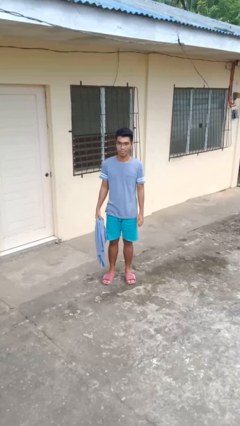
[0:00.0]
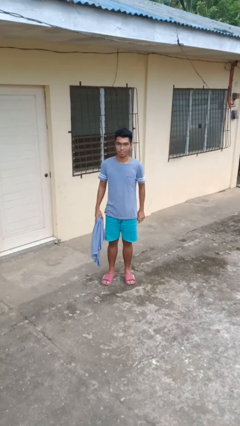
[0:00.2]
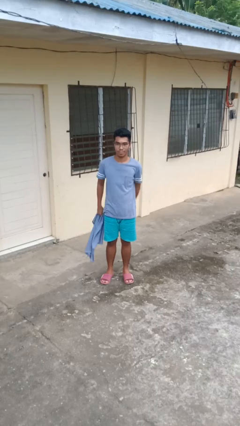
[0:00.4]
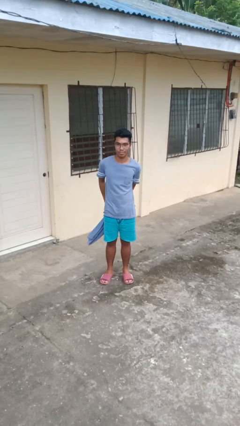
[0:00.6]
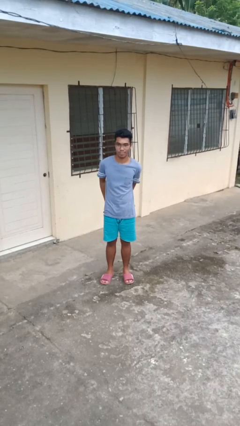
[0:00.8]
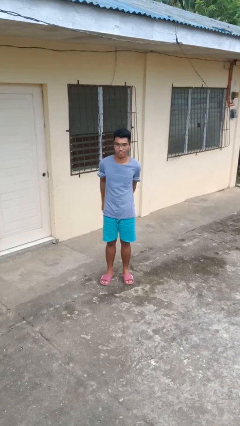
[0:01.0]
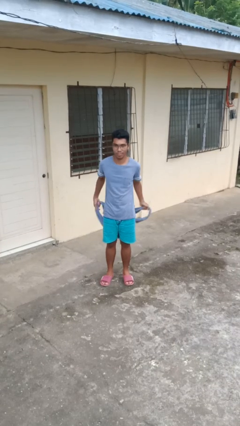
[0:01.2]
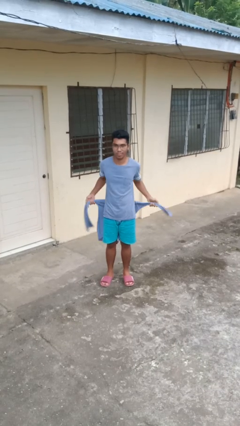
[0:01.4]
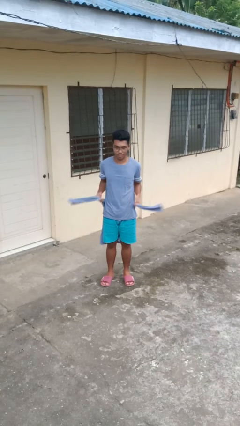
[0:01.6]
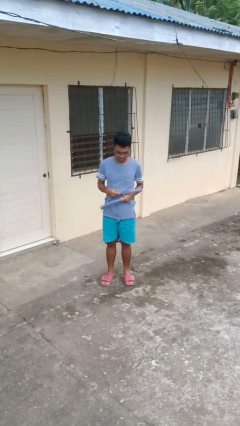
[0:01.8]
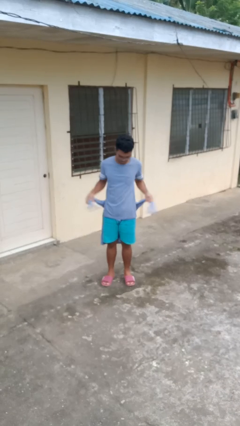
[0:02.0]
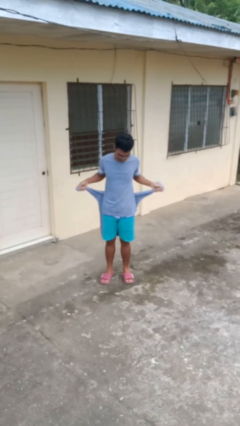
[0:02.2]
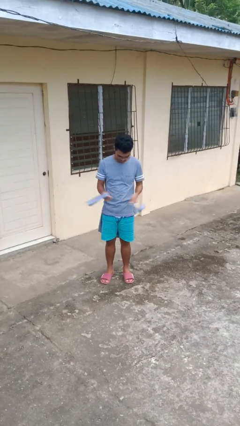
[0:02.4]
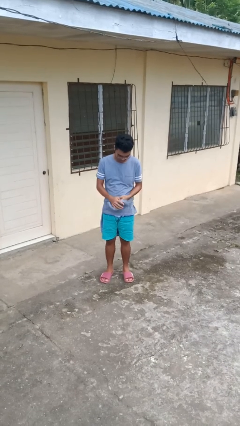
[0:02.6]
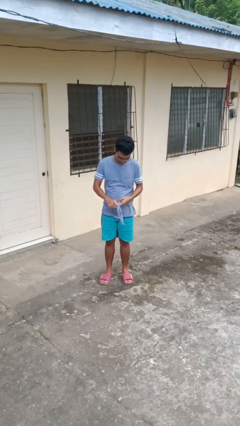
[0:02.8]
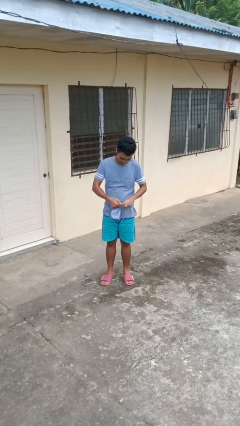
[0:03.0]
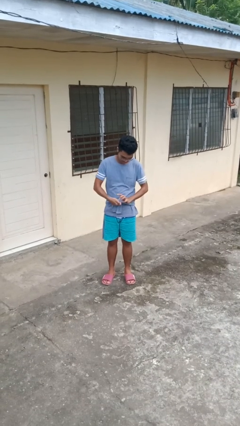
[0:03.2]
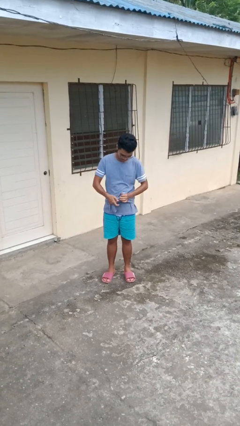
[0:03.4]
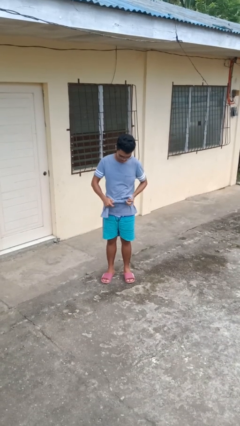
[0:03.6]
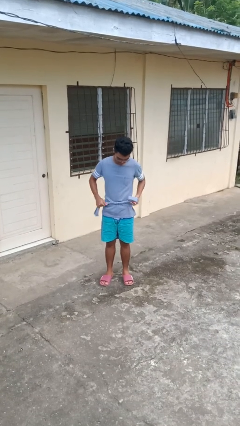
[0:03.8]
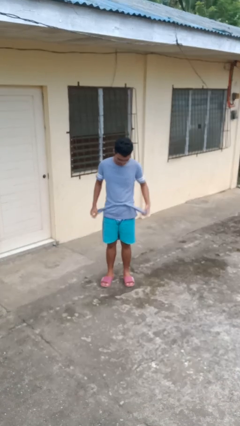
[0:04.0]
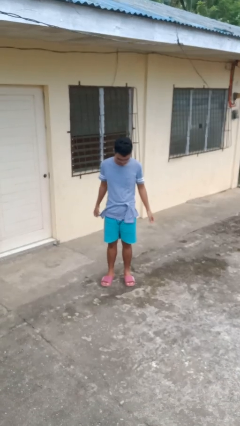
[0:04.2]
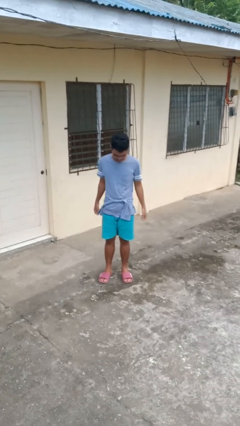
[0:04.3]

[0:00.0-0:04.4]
person ties jacket around waist

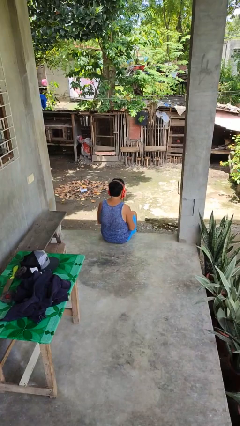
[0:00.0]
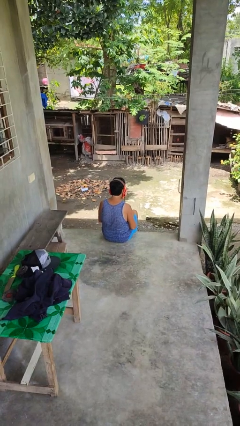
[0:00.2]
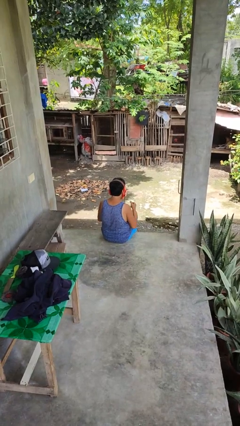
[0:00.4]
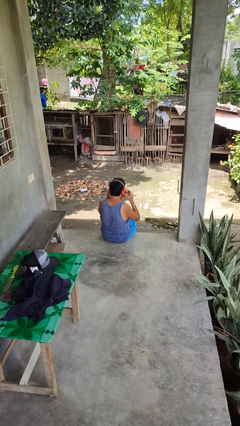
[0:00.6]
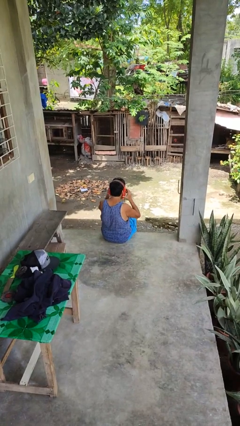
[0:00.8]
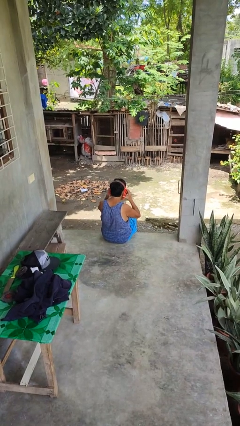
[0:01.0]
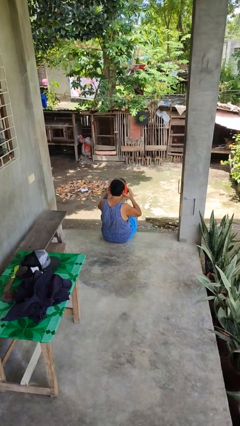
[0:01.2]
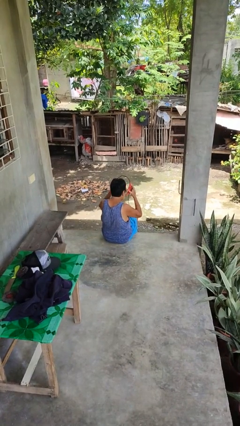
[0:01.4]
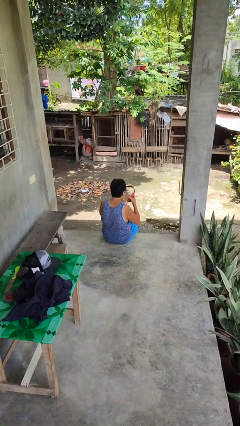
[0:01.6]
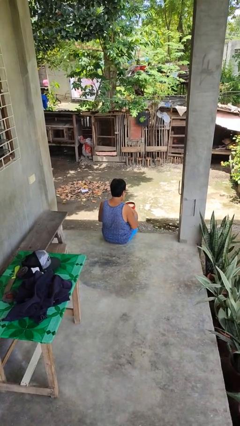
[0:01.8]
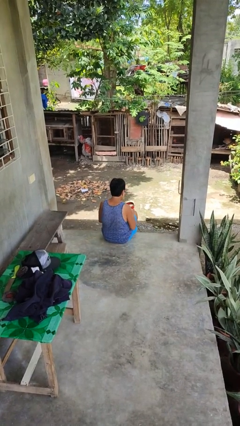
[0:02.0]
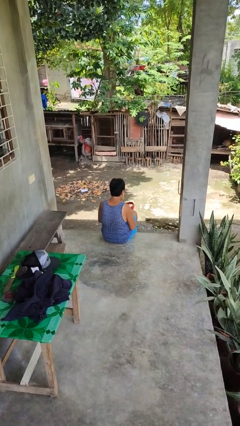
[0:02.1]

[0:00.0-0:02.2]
person takes off headphones

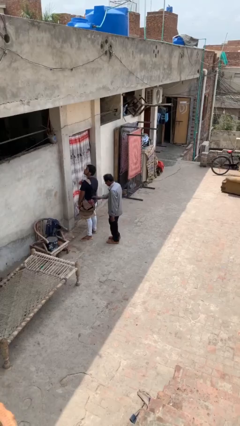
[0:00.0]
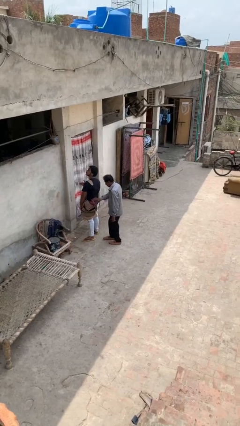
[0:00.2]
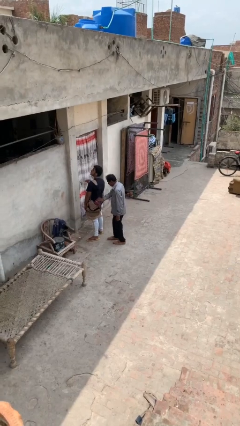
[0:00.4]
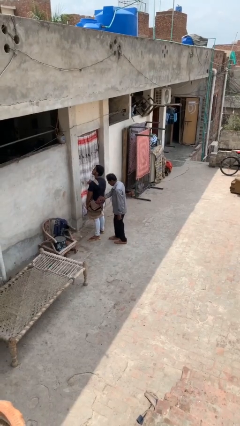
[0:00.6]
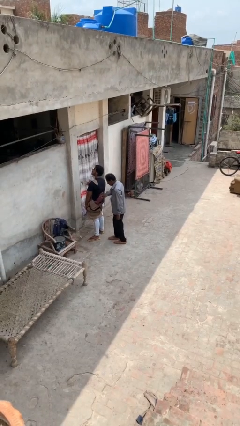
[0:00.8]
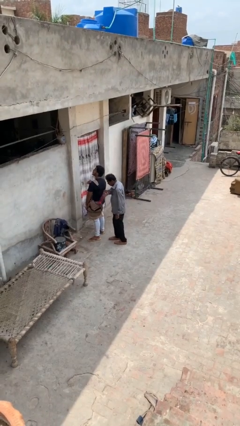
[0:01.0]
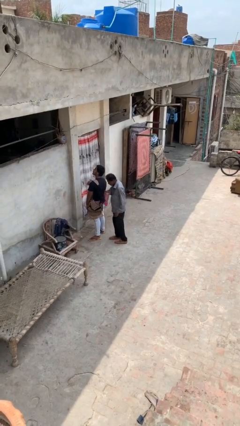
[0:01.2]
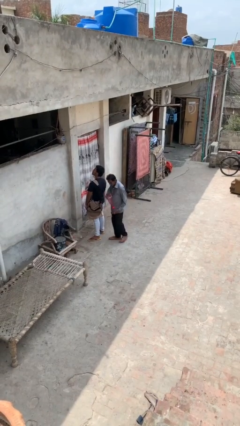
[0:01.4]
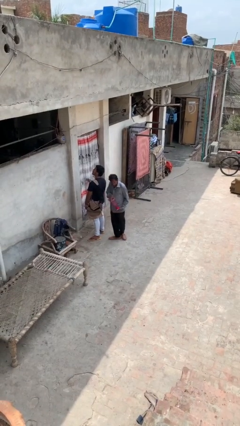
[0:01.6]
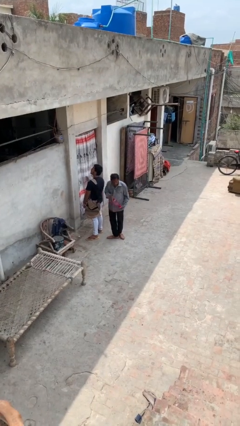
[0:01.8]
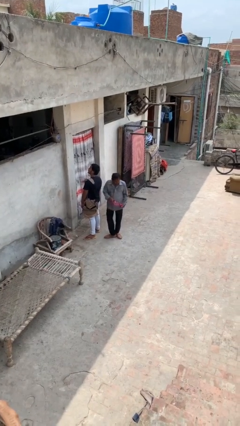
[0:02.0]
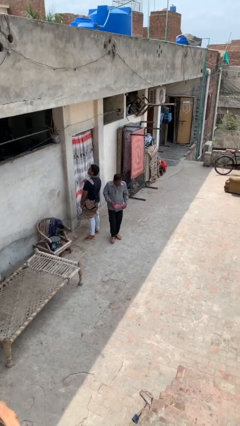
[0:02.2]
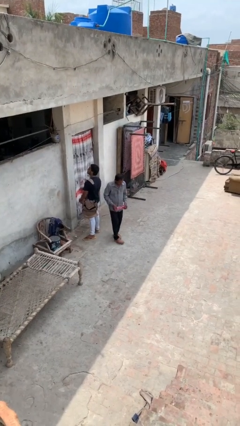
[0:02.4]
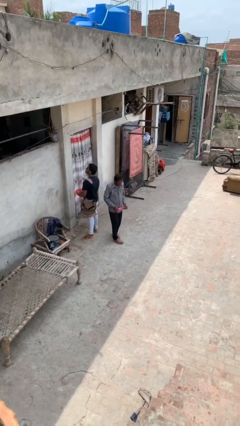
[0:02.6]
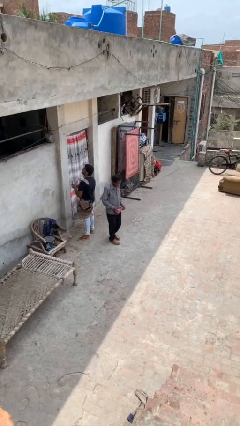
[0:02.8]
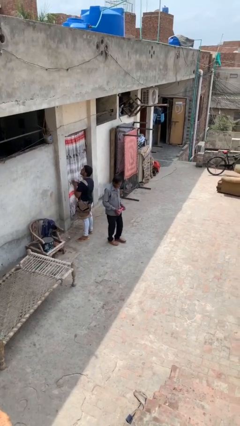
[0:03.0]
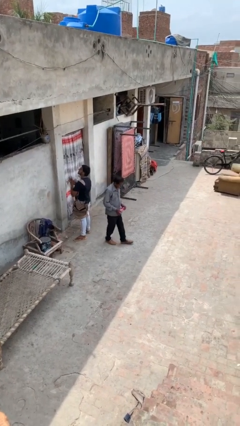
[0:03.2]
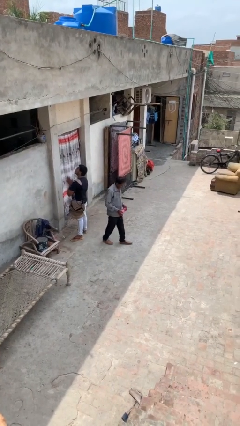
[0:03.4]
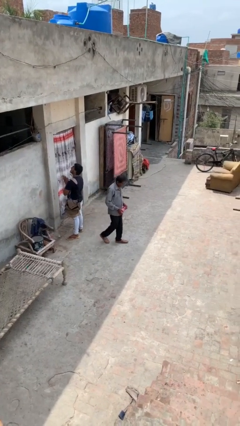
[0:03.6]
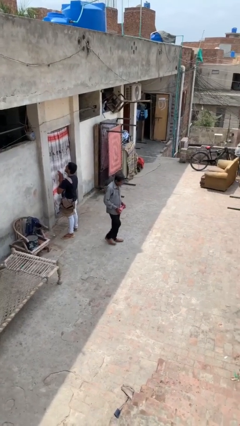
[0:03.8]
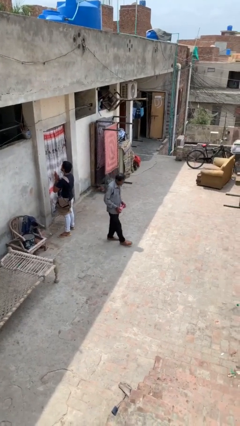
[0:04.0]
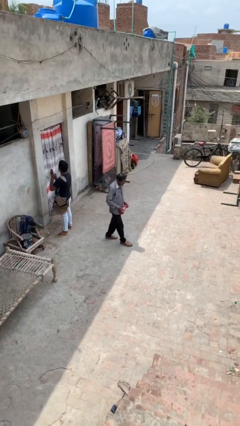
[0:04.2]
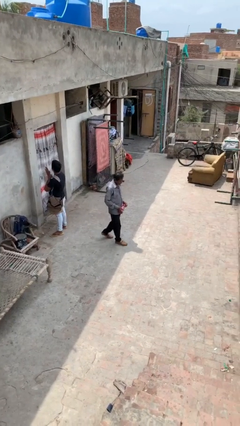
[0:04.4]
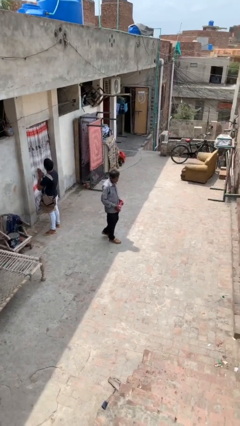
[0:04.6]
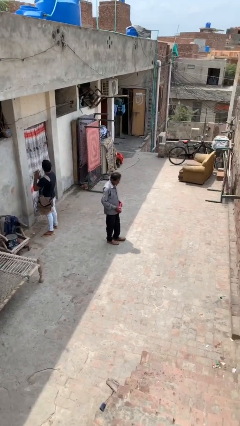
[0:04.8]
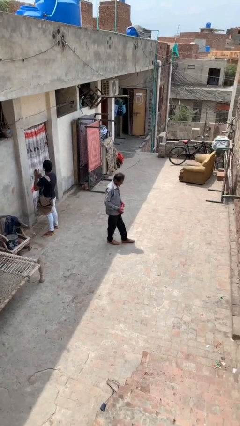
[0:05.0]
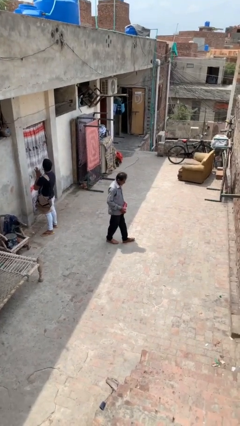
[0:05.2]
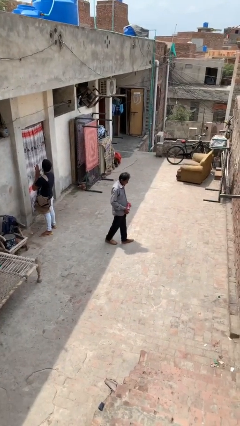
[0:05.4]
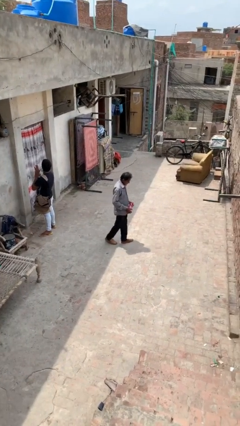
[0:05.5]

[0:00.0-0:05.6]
person steals object from person

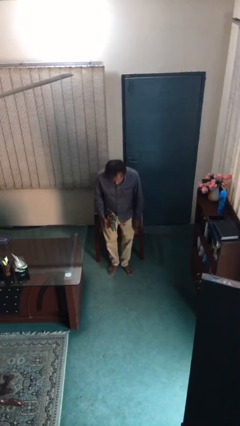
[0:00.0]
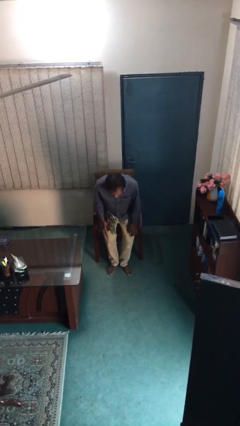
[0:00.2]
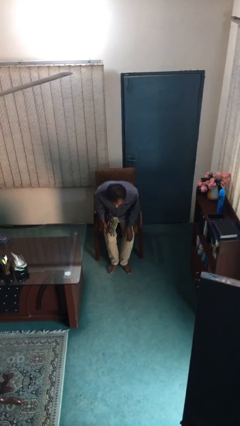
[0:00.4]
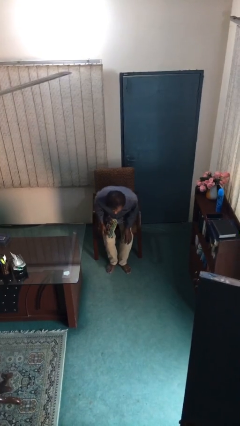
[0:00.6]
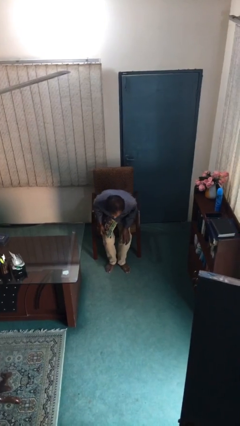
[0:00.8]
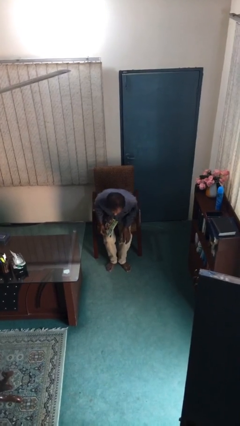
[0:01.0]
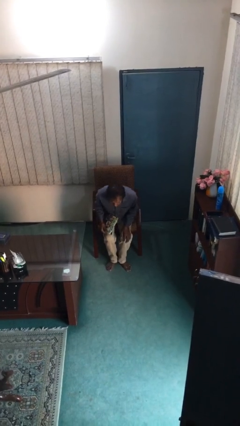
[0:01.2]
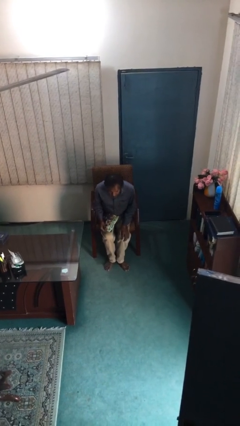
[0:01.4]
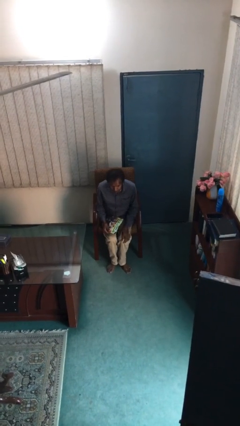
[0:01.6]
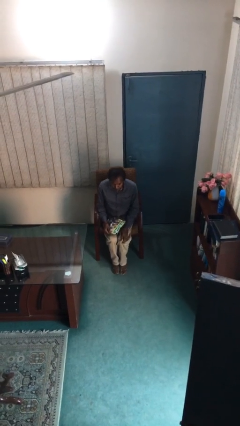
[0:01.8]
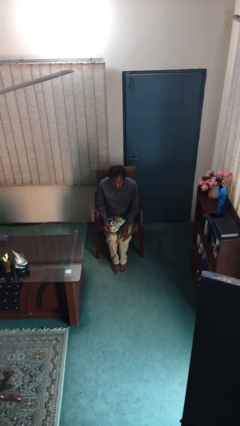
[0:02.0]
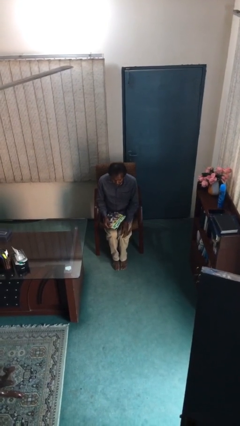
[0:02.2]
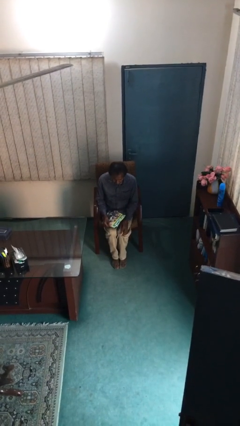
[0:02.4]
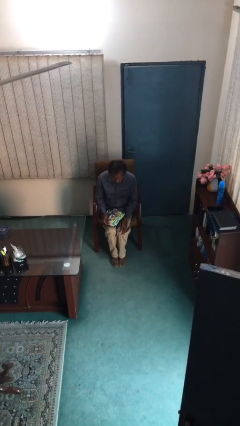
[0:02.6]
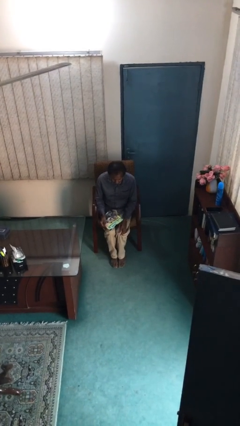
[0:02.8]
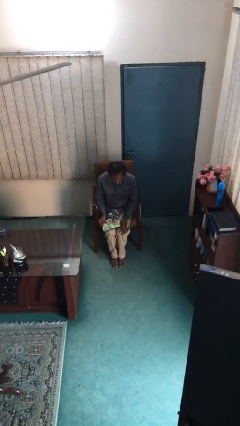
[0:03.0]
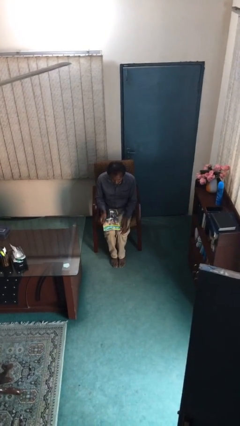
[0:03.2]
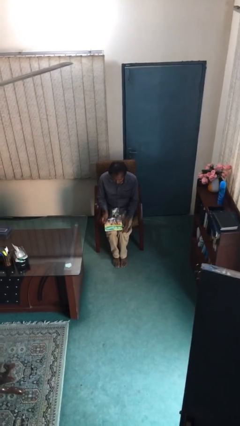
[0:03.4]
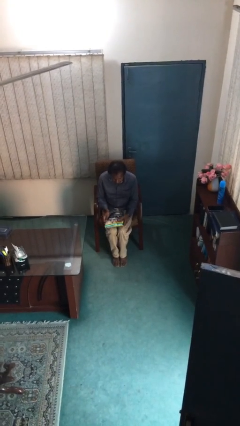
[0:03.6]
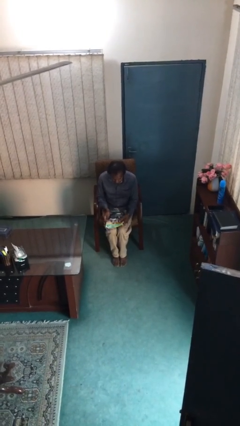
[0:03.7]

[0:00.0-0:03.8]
person sits down

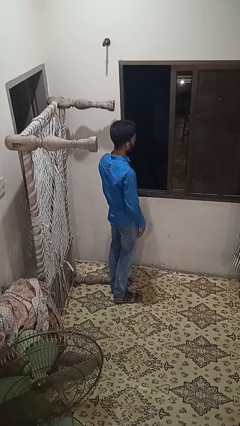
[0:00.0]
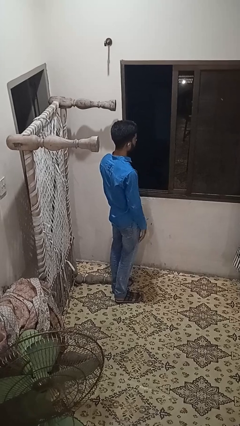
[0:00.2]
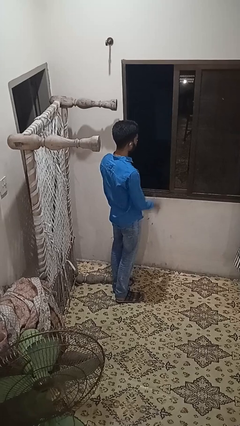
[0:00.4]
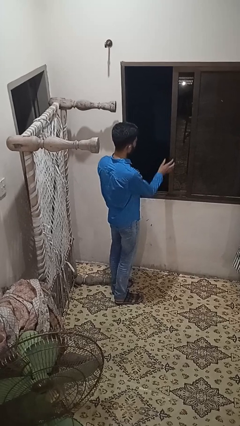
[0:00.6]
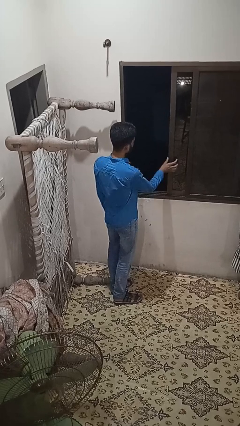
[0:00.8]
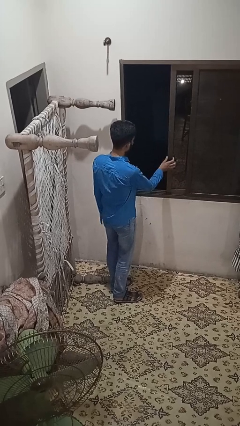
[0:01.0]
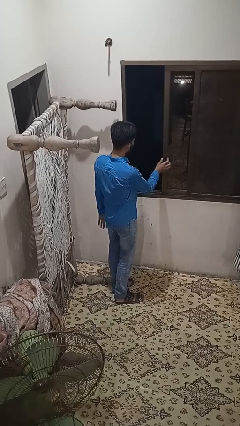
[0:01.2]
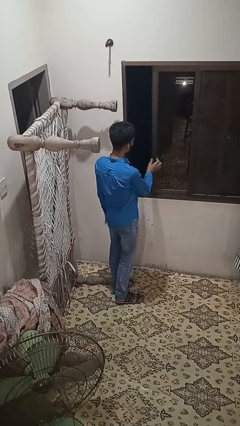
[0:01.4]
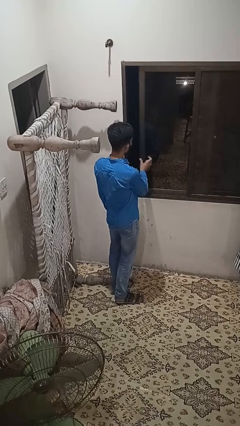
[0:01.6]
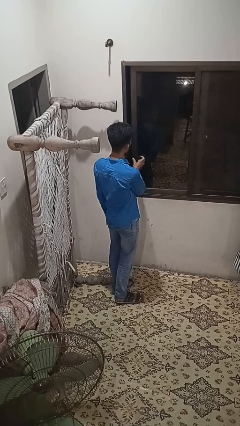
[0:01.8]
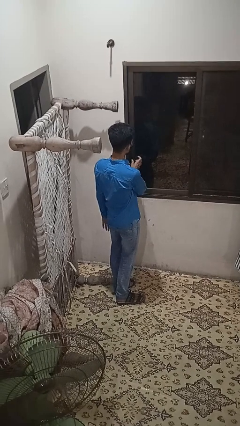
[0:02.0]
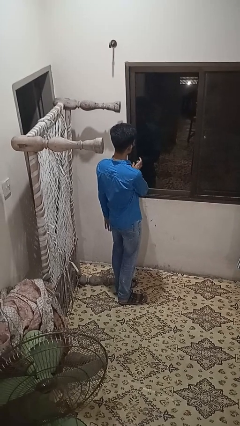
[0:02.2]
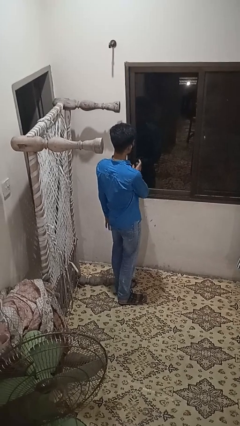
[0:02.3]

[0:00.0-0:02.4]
person closes home window
